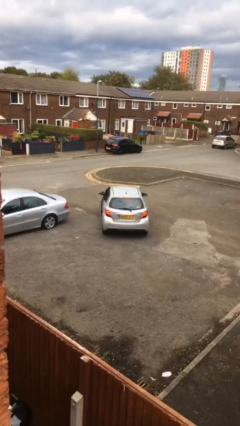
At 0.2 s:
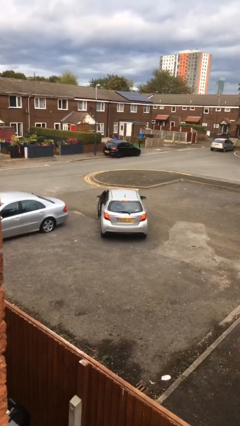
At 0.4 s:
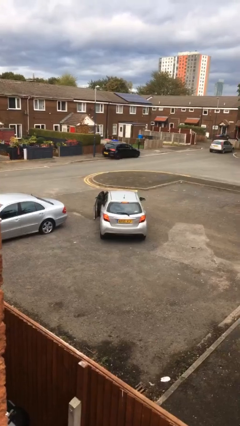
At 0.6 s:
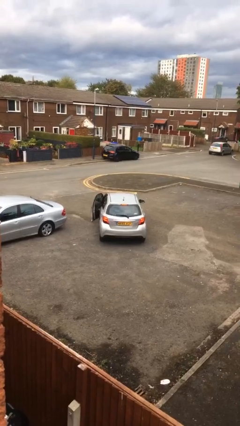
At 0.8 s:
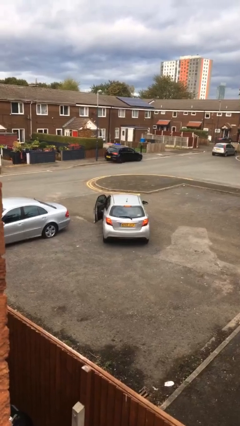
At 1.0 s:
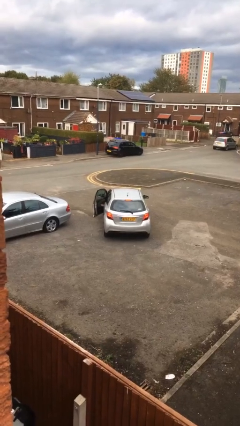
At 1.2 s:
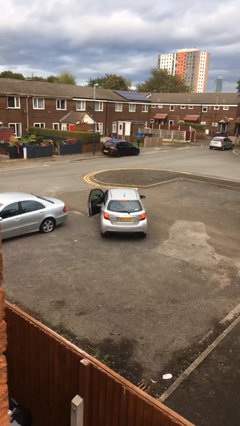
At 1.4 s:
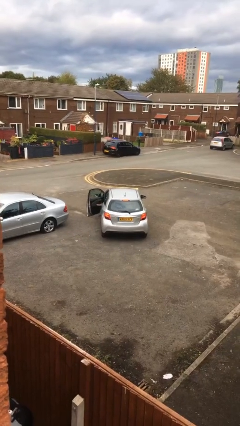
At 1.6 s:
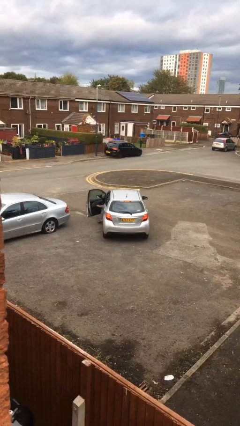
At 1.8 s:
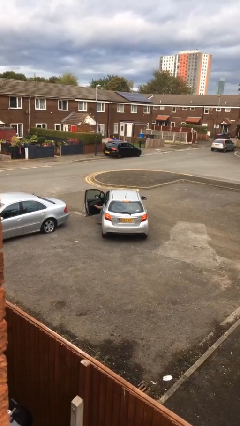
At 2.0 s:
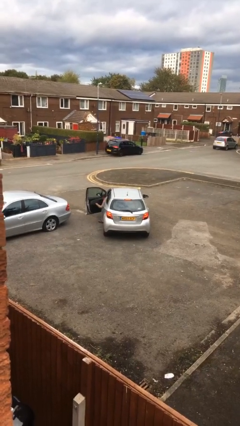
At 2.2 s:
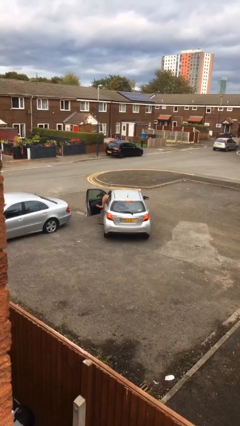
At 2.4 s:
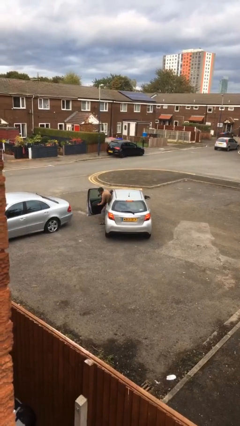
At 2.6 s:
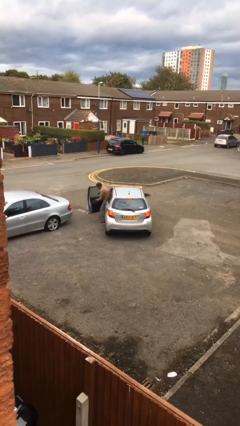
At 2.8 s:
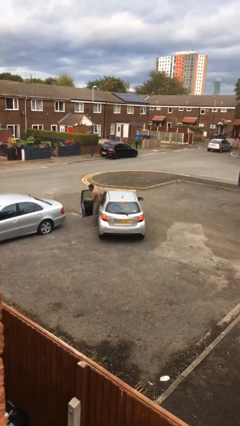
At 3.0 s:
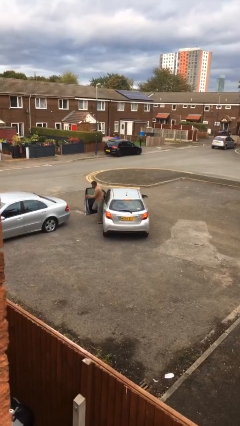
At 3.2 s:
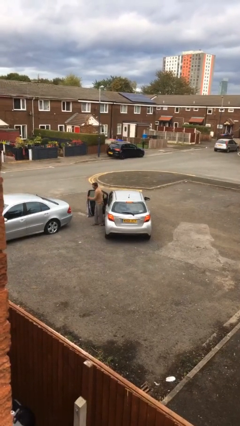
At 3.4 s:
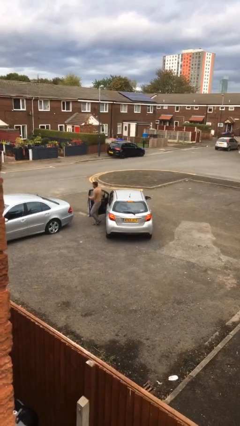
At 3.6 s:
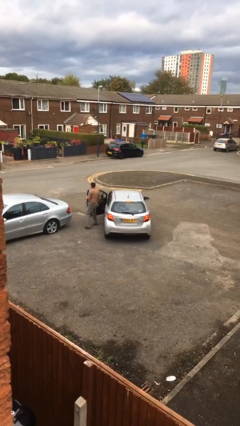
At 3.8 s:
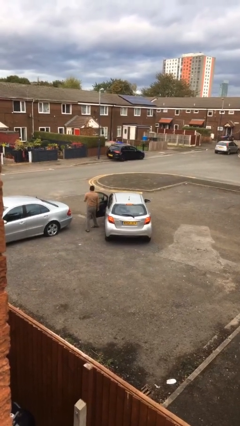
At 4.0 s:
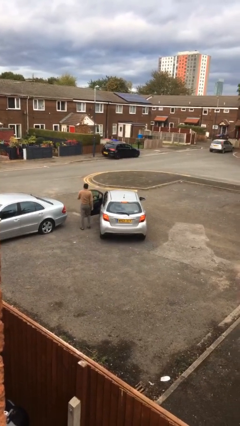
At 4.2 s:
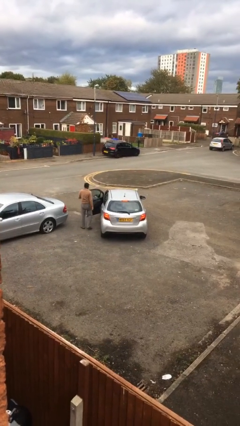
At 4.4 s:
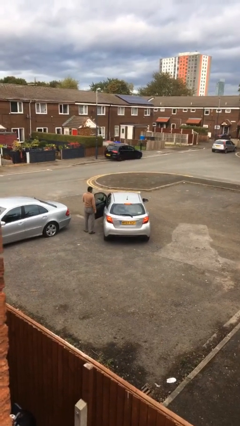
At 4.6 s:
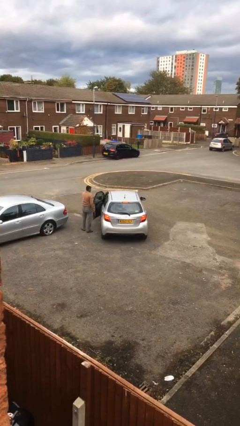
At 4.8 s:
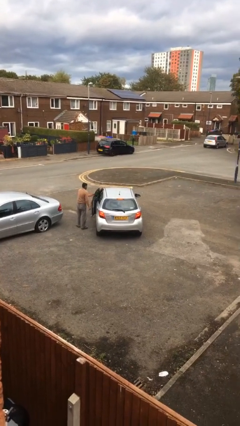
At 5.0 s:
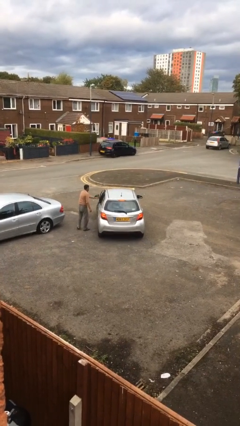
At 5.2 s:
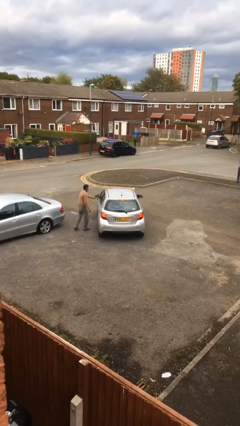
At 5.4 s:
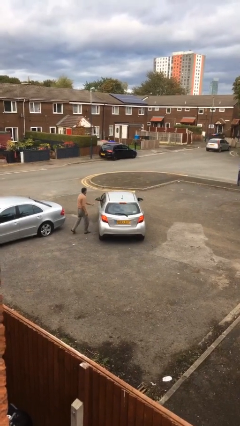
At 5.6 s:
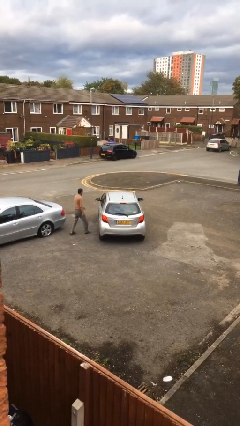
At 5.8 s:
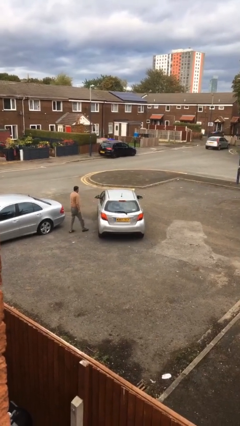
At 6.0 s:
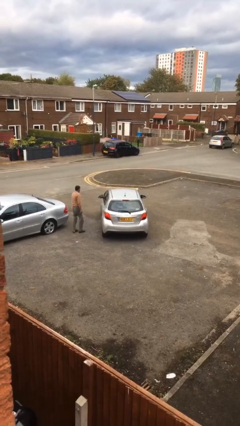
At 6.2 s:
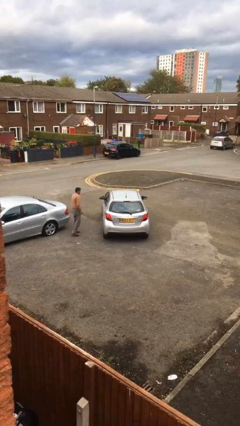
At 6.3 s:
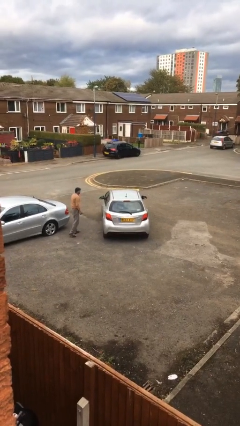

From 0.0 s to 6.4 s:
car drops off person

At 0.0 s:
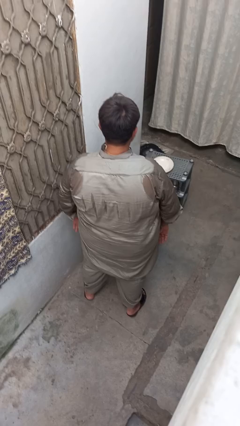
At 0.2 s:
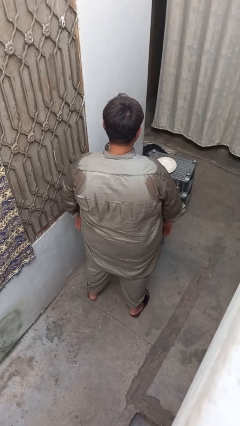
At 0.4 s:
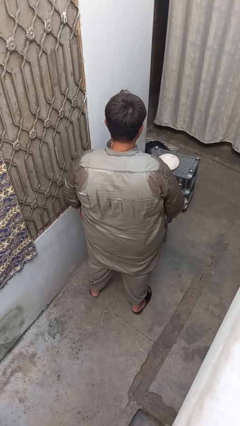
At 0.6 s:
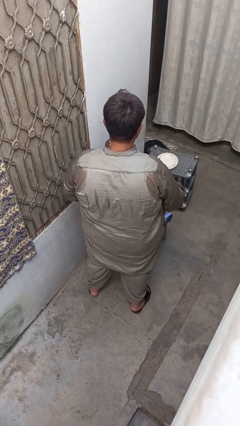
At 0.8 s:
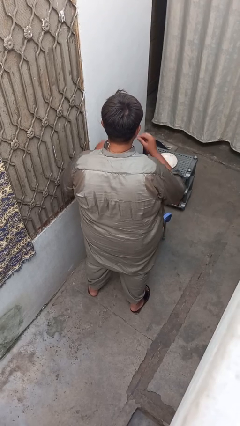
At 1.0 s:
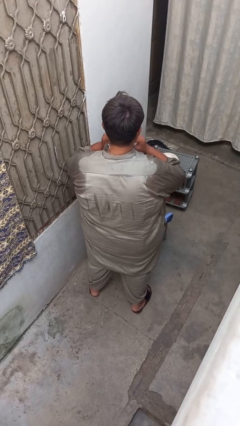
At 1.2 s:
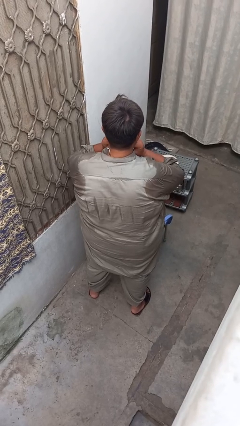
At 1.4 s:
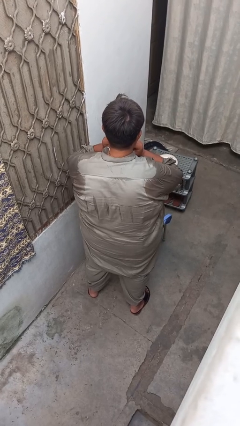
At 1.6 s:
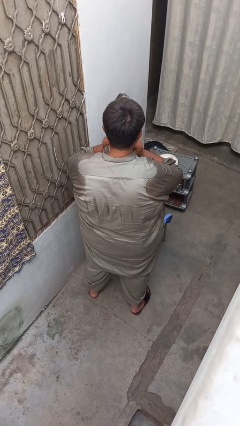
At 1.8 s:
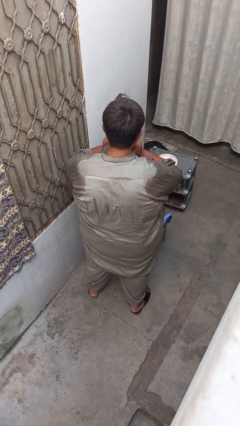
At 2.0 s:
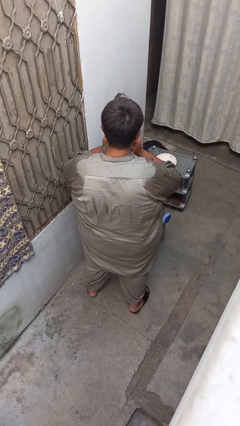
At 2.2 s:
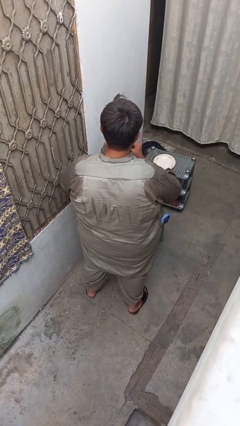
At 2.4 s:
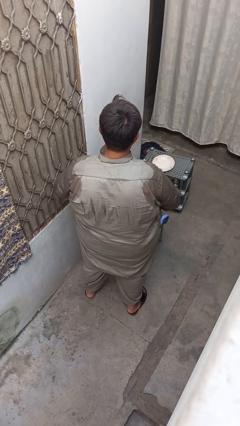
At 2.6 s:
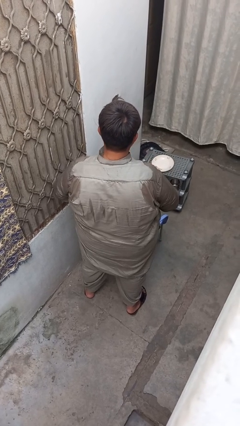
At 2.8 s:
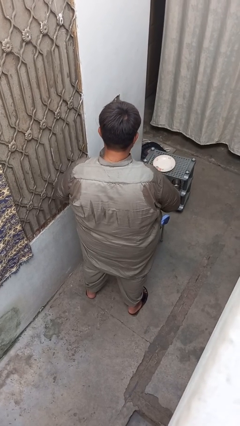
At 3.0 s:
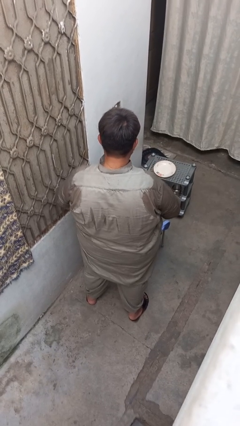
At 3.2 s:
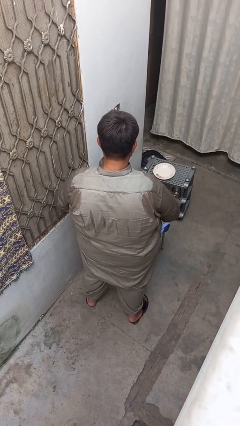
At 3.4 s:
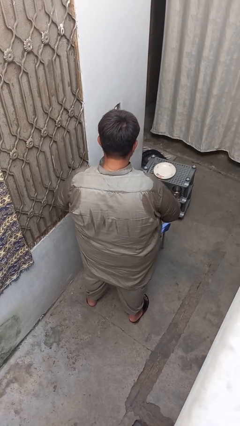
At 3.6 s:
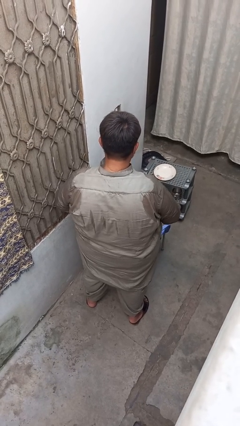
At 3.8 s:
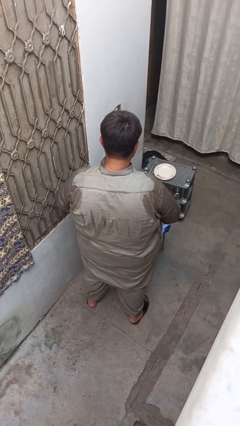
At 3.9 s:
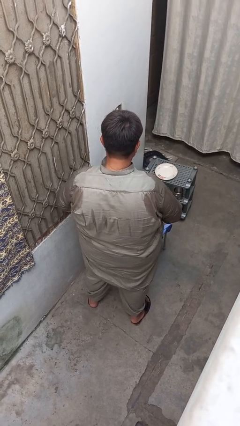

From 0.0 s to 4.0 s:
person takes off necklace

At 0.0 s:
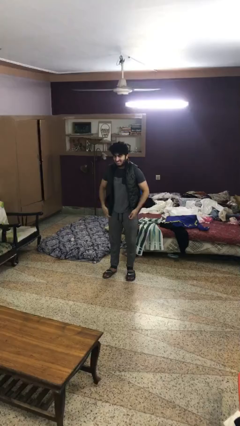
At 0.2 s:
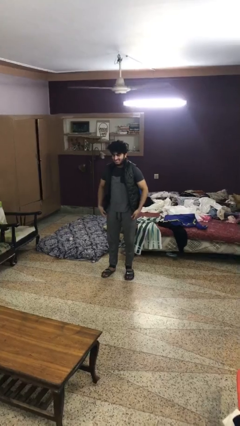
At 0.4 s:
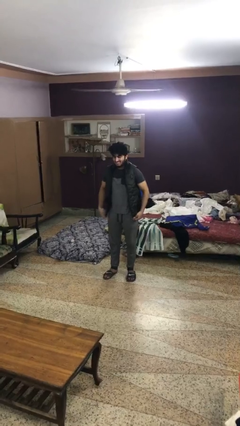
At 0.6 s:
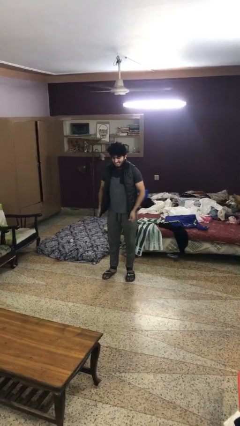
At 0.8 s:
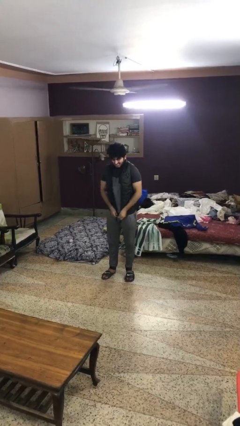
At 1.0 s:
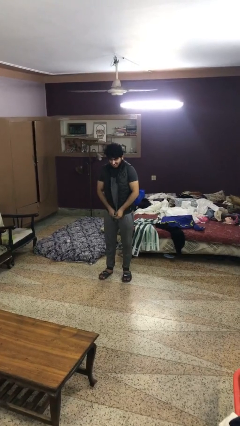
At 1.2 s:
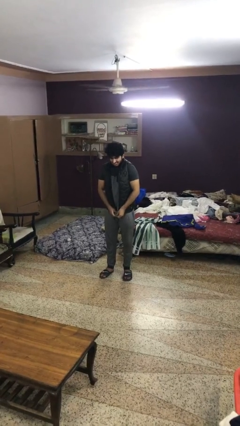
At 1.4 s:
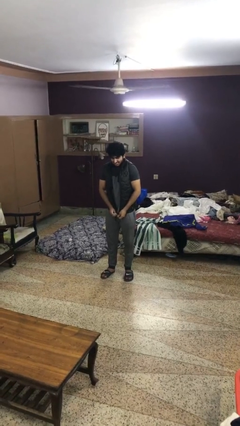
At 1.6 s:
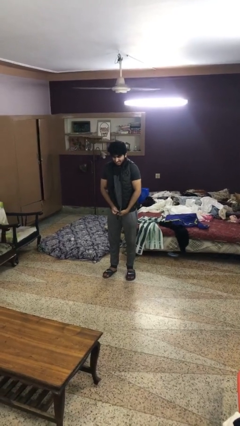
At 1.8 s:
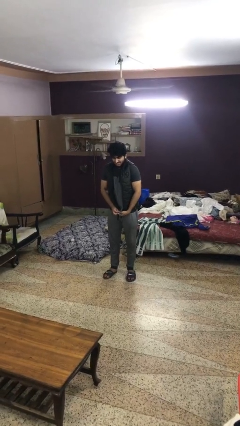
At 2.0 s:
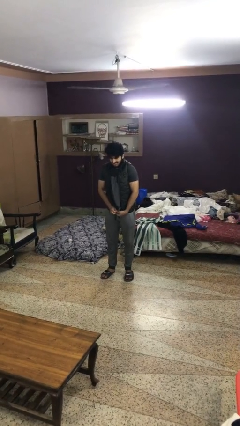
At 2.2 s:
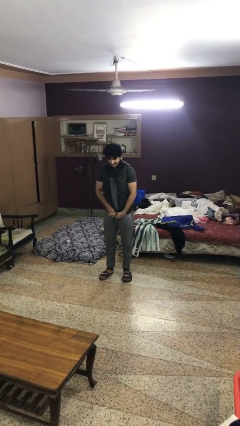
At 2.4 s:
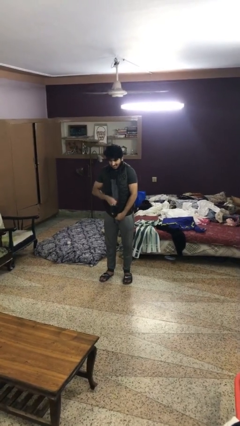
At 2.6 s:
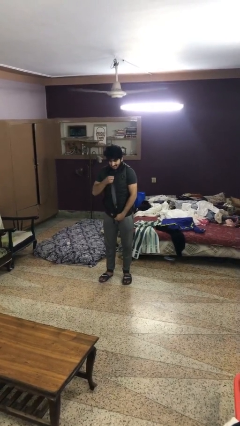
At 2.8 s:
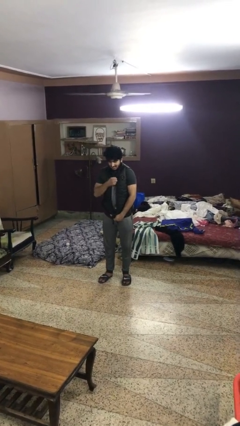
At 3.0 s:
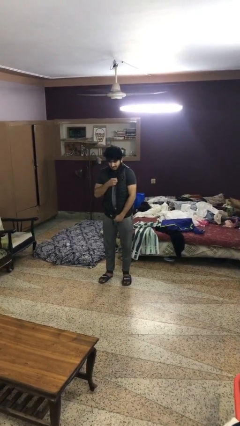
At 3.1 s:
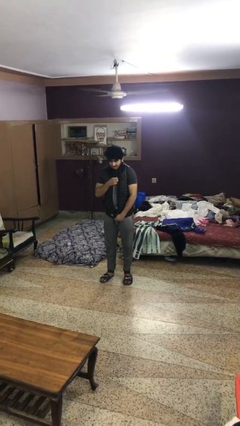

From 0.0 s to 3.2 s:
person zips up jacket

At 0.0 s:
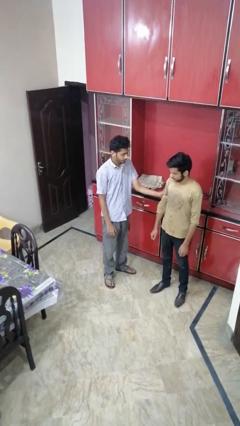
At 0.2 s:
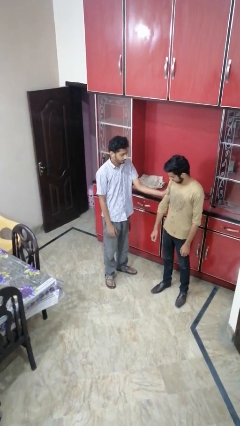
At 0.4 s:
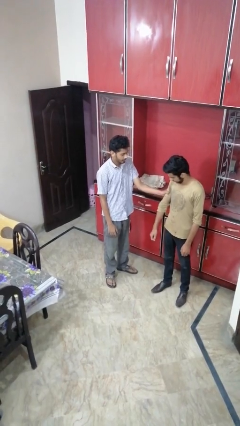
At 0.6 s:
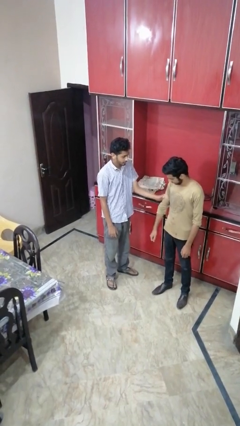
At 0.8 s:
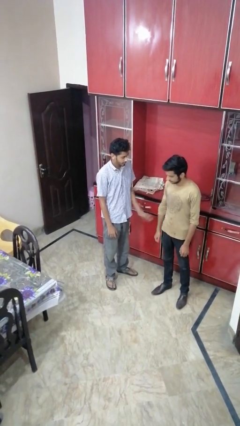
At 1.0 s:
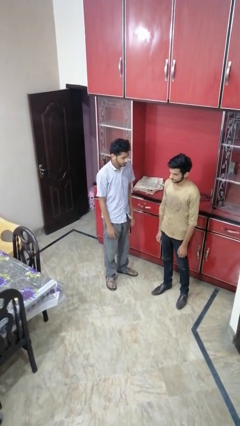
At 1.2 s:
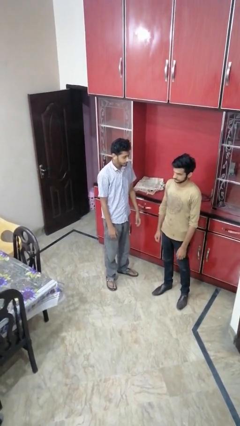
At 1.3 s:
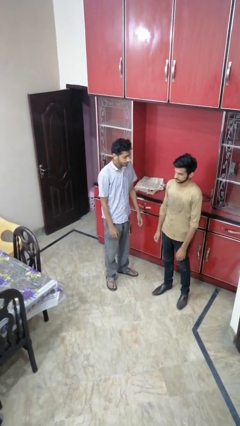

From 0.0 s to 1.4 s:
person grabs person by bicep

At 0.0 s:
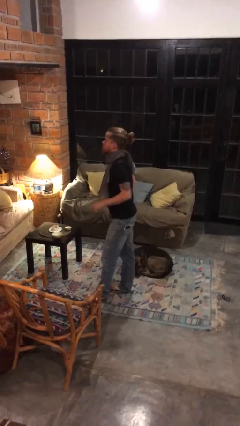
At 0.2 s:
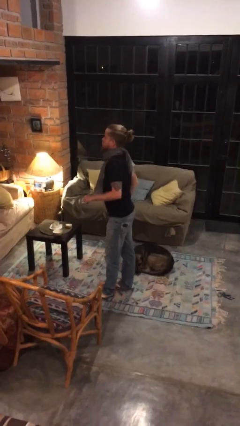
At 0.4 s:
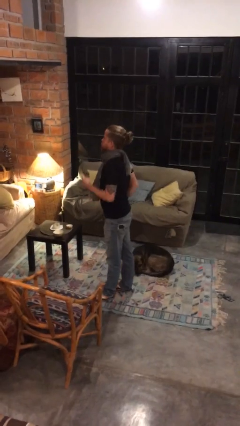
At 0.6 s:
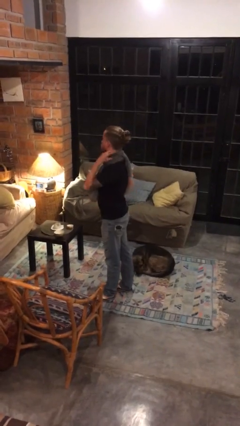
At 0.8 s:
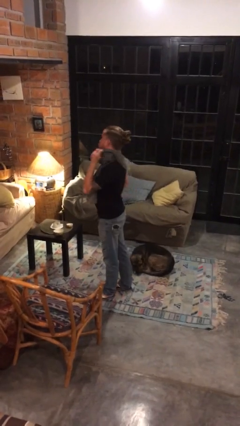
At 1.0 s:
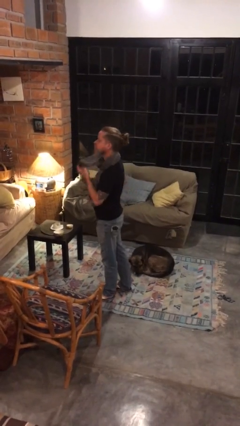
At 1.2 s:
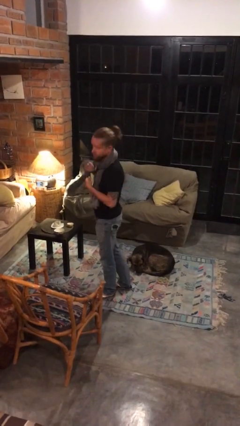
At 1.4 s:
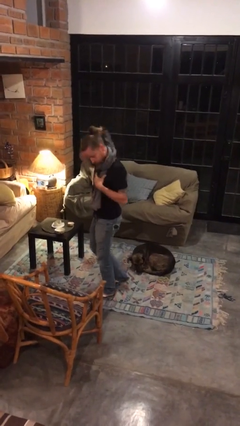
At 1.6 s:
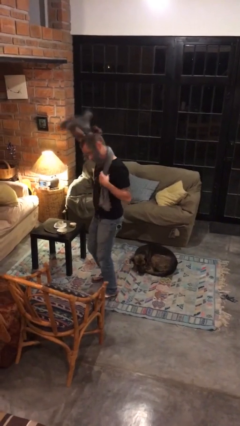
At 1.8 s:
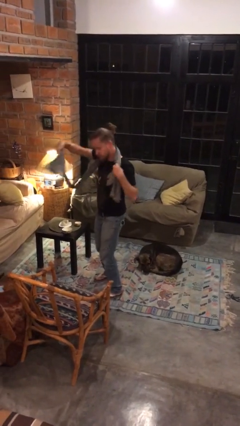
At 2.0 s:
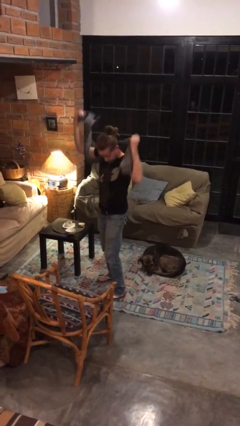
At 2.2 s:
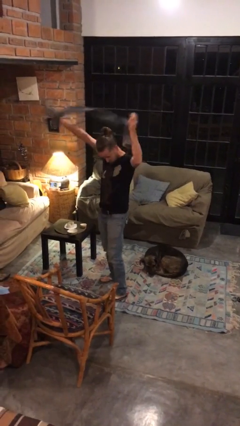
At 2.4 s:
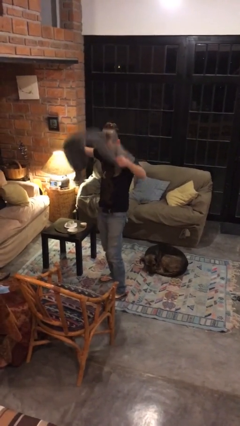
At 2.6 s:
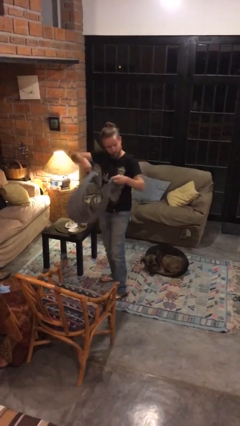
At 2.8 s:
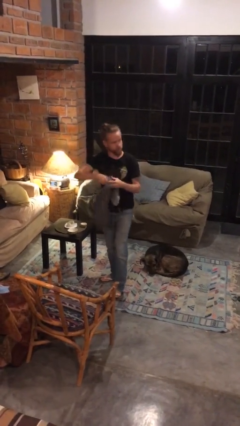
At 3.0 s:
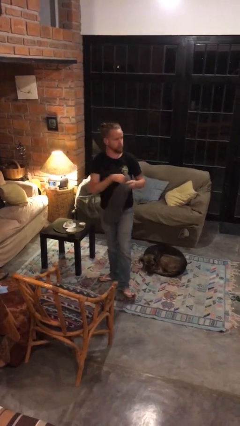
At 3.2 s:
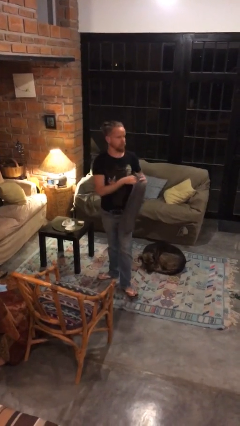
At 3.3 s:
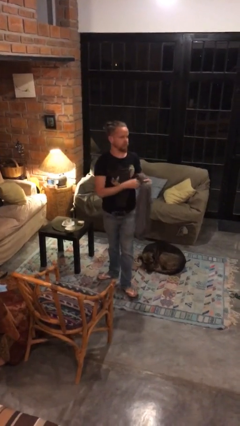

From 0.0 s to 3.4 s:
person takes off scarf
